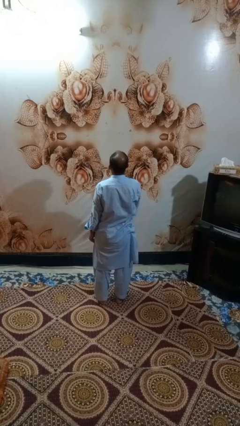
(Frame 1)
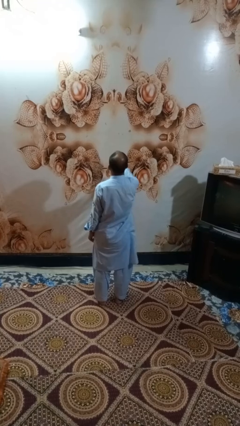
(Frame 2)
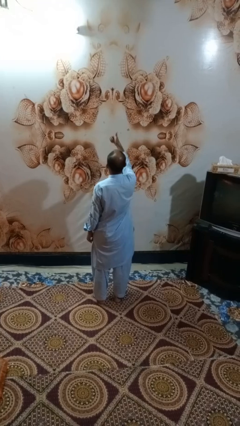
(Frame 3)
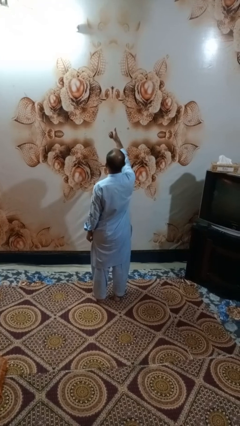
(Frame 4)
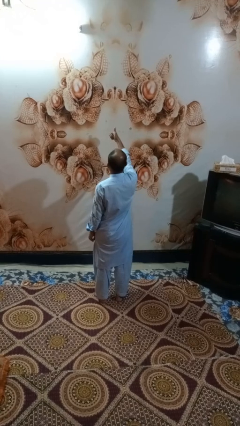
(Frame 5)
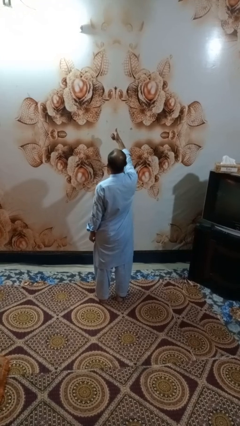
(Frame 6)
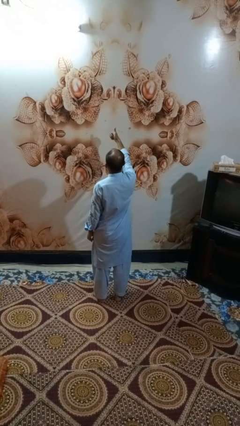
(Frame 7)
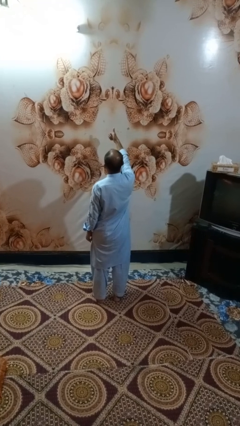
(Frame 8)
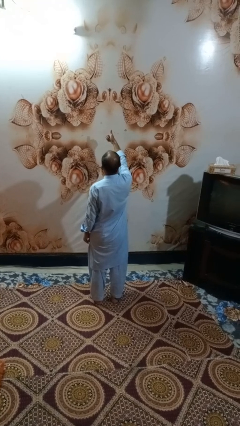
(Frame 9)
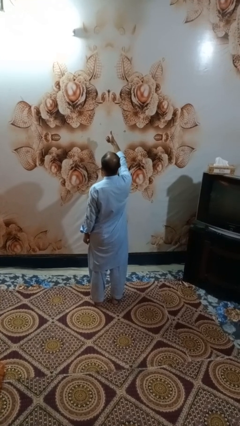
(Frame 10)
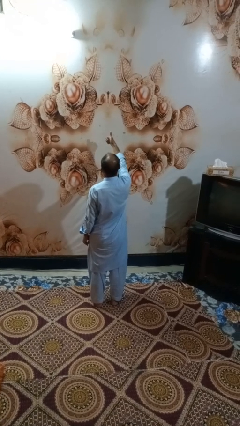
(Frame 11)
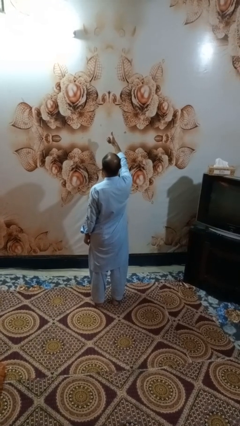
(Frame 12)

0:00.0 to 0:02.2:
person gestures thumbs up

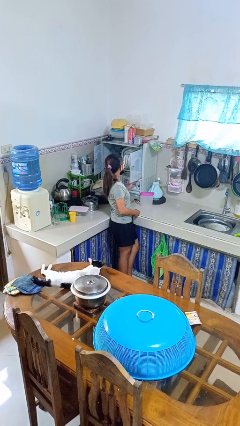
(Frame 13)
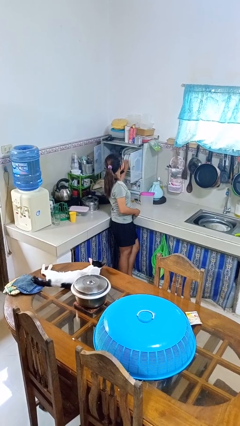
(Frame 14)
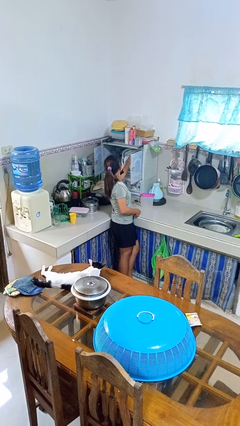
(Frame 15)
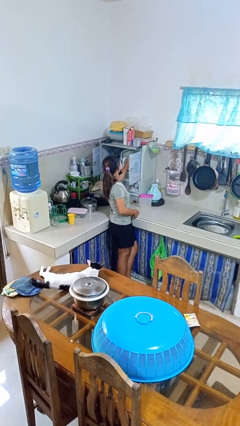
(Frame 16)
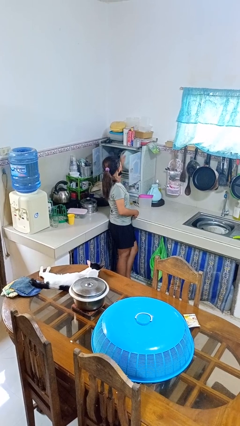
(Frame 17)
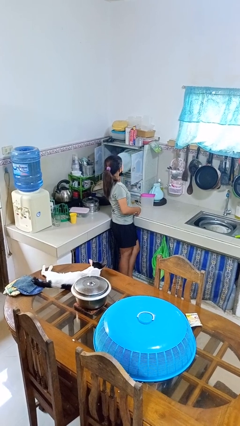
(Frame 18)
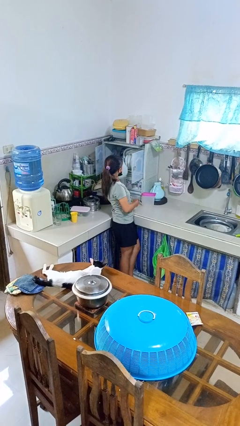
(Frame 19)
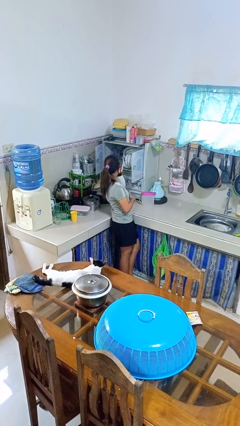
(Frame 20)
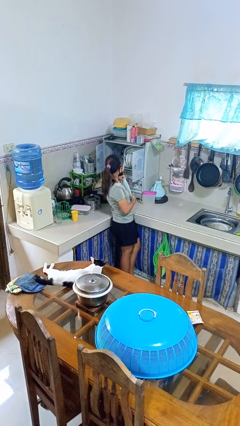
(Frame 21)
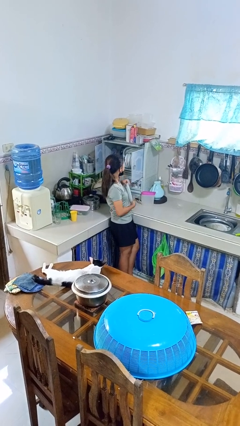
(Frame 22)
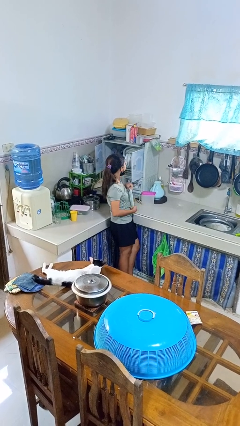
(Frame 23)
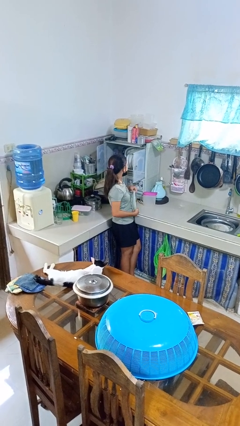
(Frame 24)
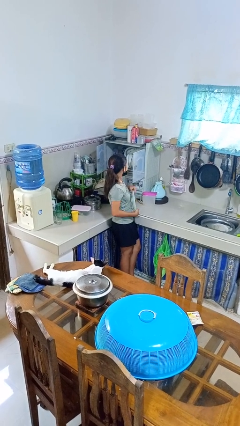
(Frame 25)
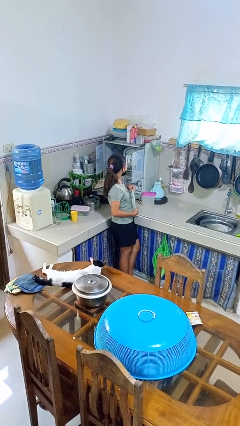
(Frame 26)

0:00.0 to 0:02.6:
person takes object from kitchen drawer

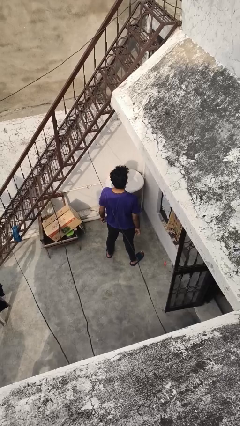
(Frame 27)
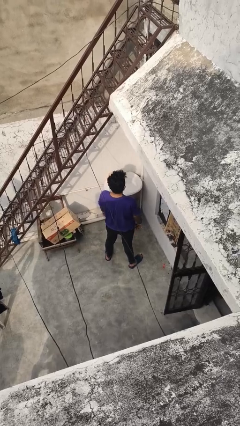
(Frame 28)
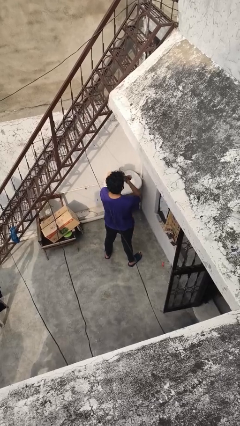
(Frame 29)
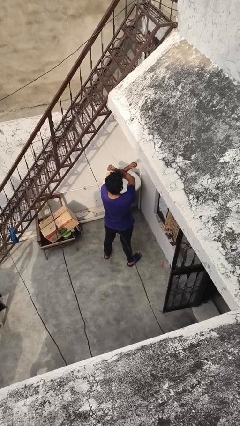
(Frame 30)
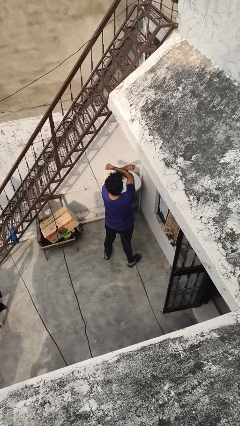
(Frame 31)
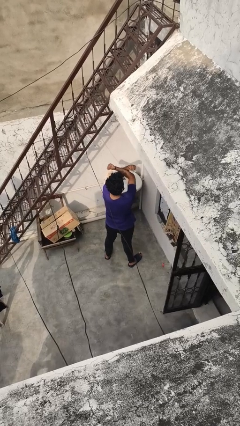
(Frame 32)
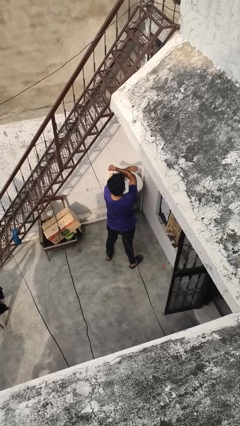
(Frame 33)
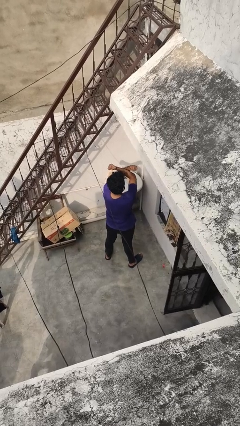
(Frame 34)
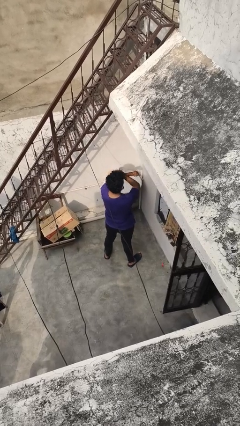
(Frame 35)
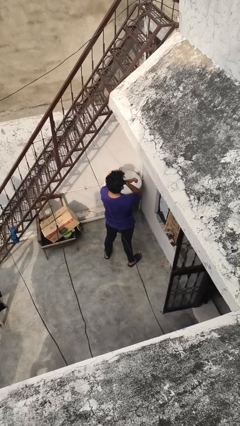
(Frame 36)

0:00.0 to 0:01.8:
person gestures arms x

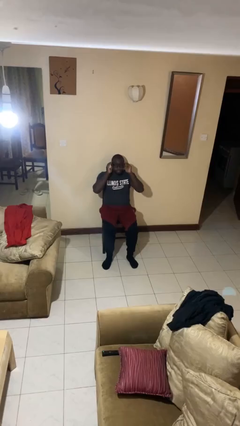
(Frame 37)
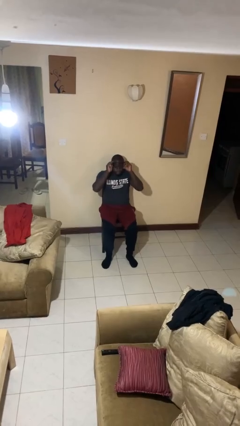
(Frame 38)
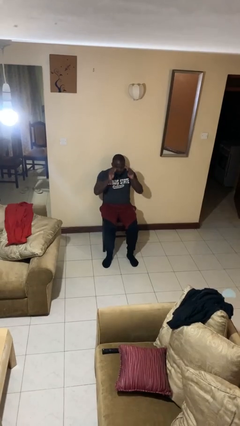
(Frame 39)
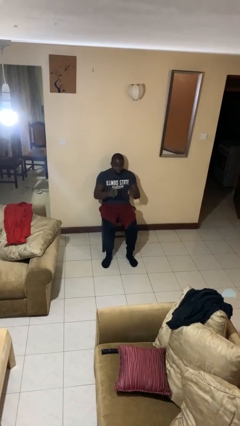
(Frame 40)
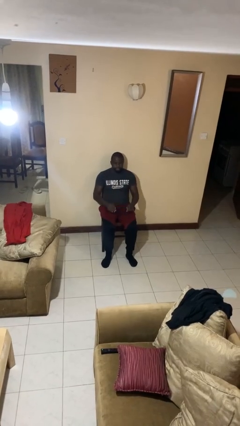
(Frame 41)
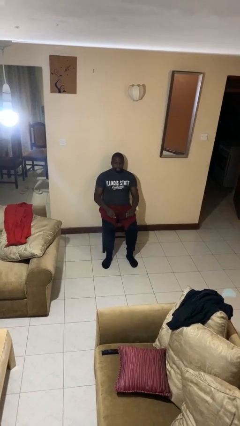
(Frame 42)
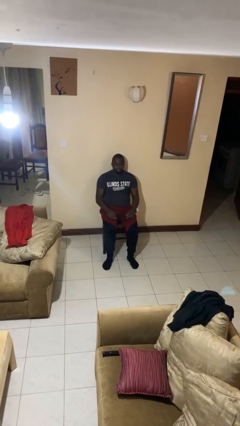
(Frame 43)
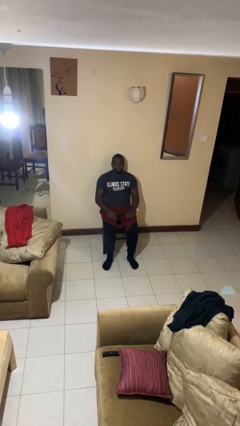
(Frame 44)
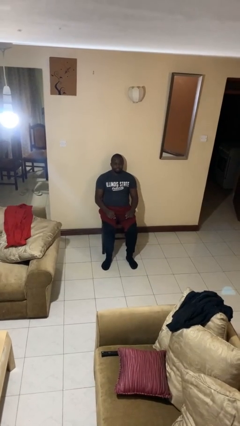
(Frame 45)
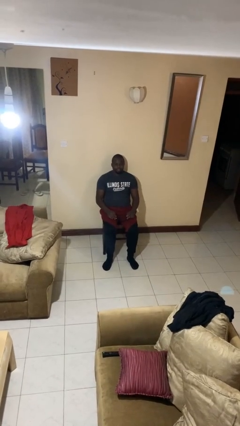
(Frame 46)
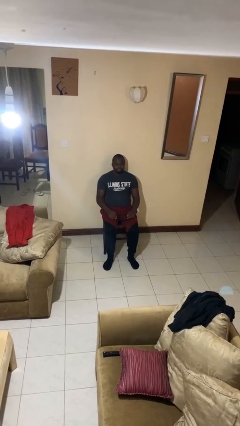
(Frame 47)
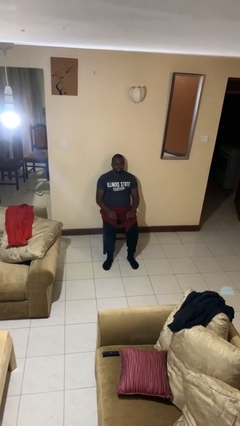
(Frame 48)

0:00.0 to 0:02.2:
person takes off glasses

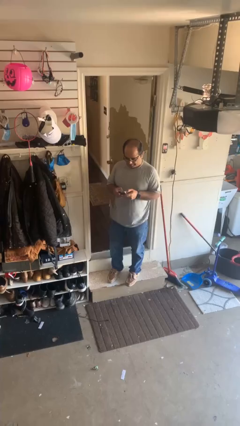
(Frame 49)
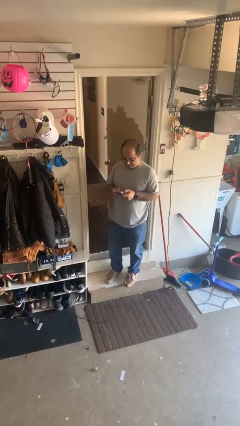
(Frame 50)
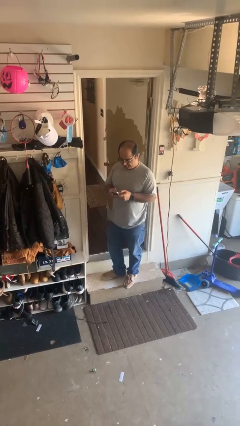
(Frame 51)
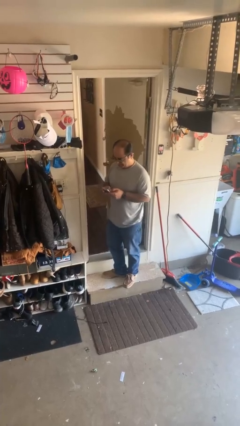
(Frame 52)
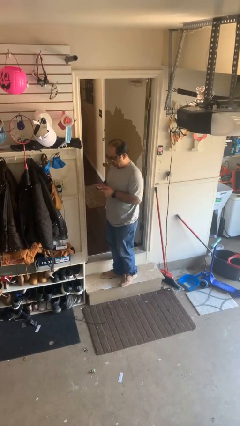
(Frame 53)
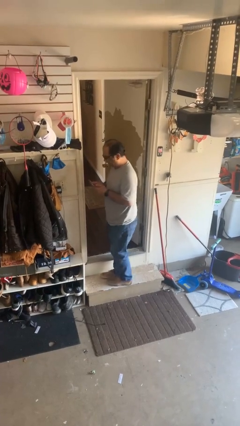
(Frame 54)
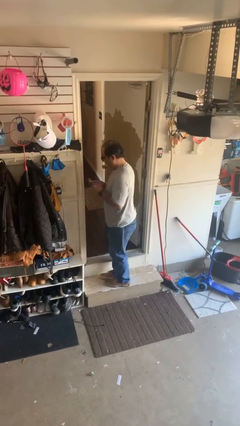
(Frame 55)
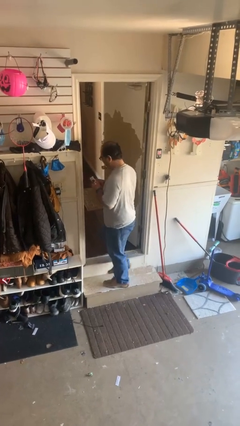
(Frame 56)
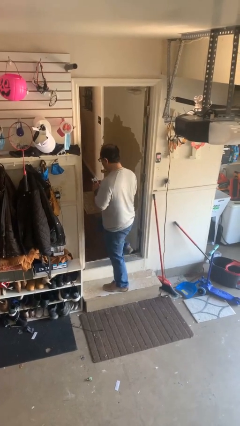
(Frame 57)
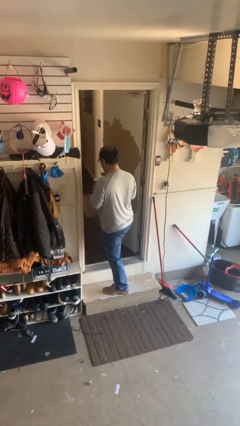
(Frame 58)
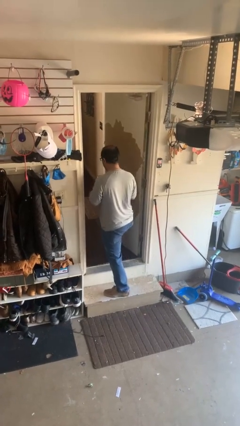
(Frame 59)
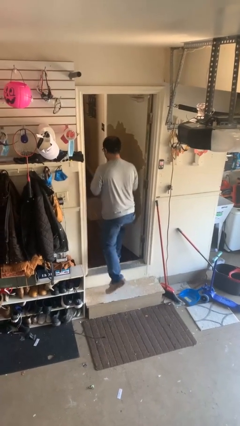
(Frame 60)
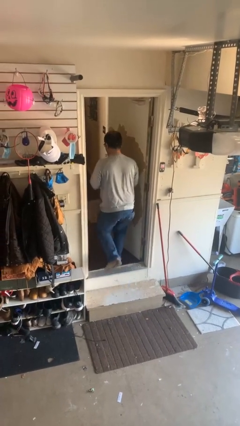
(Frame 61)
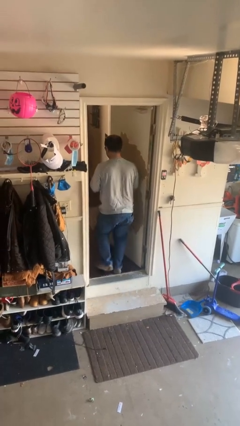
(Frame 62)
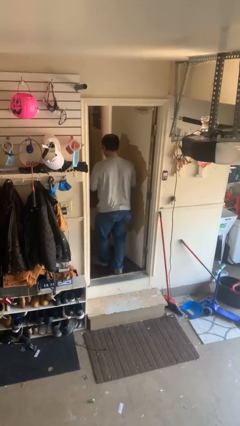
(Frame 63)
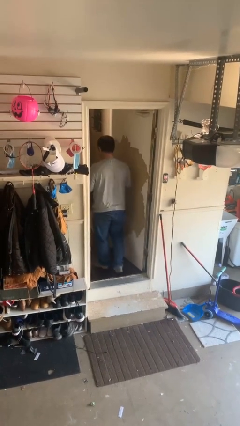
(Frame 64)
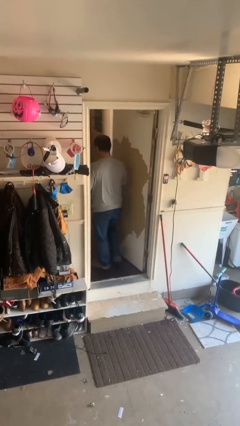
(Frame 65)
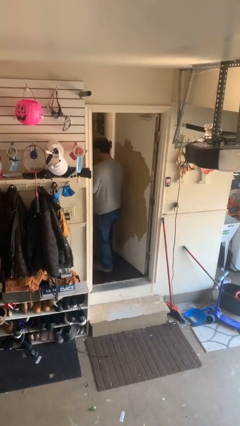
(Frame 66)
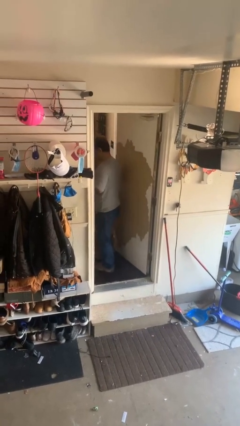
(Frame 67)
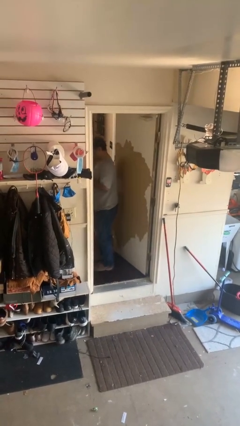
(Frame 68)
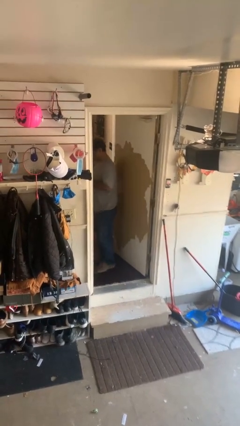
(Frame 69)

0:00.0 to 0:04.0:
person exits scene through structure

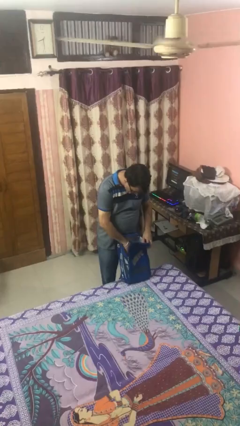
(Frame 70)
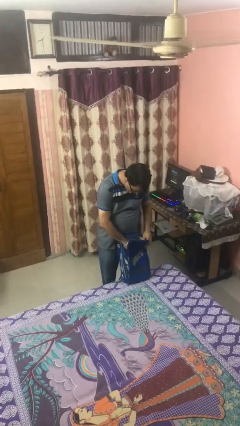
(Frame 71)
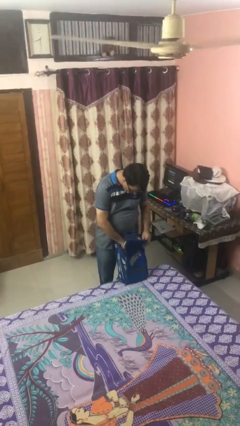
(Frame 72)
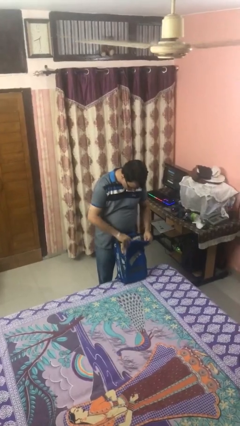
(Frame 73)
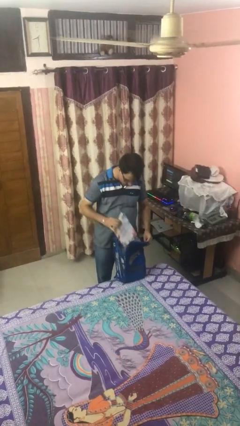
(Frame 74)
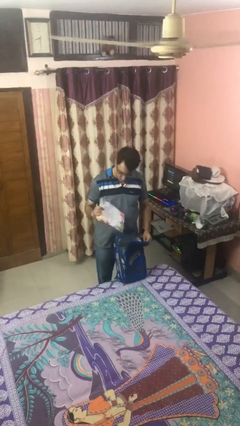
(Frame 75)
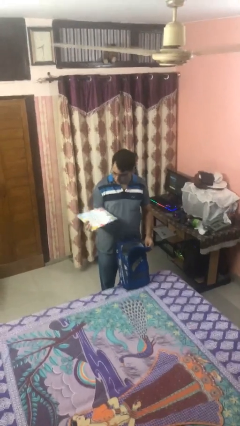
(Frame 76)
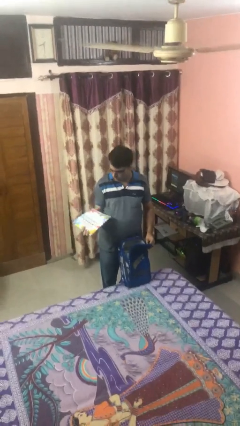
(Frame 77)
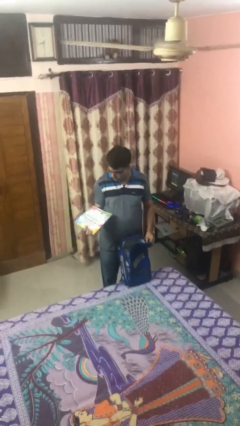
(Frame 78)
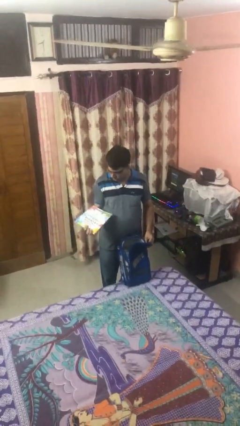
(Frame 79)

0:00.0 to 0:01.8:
person takes object from backpack

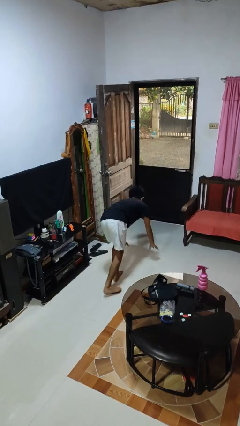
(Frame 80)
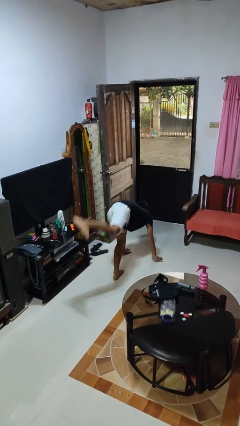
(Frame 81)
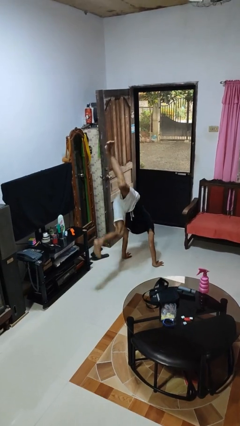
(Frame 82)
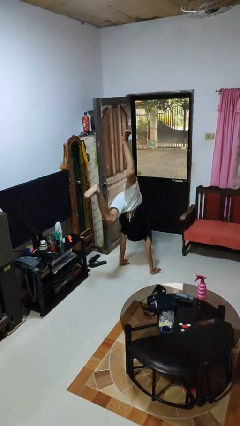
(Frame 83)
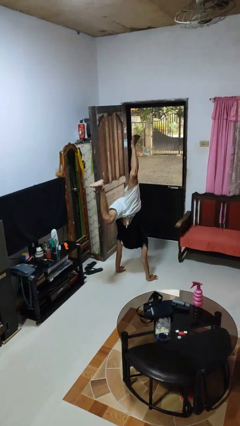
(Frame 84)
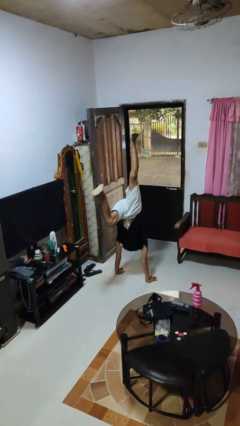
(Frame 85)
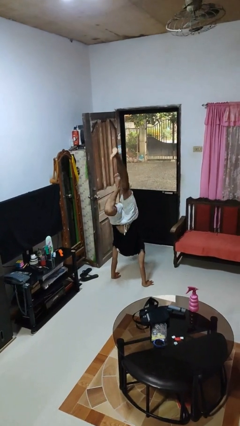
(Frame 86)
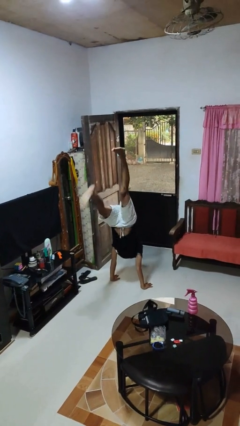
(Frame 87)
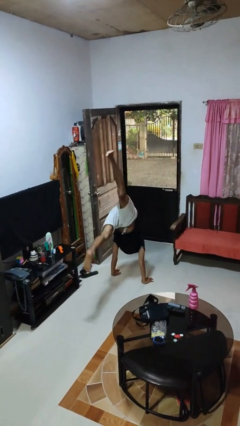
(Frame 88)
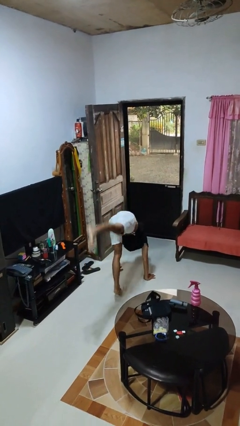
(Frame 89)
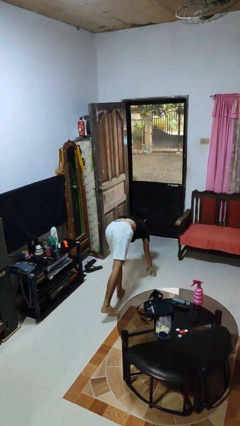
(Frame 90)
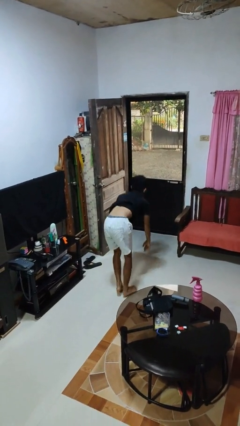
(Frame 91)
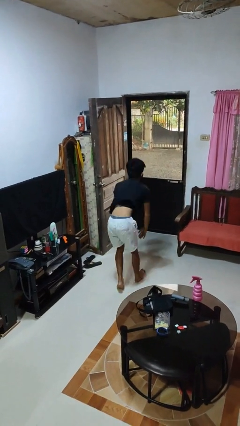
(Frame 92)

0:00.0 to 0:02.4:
person handstand
